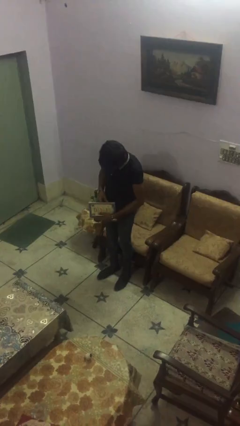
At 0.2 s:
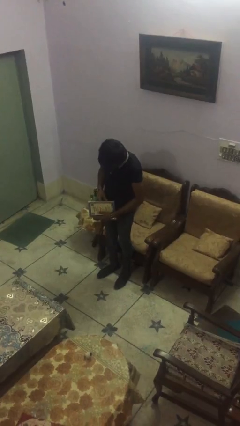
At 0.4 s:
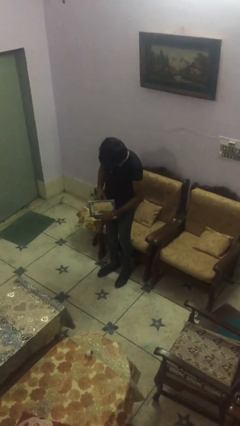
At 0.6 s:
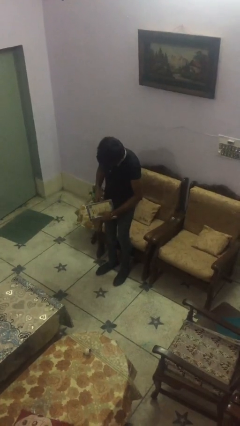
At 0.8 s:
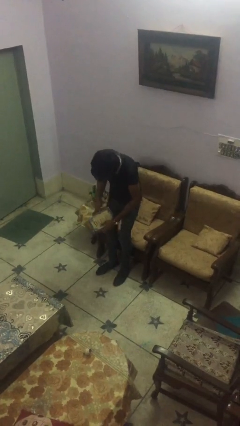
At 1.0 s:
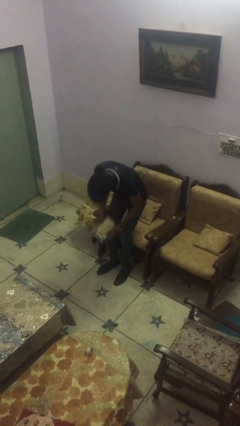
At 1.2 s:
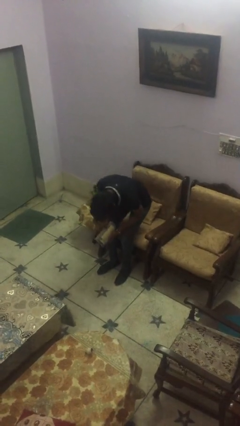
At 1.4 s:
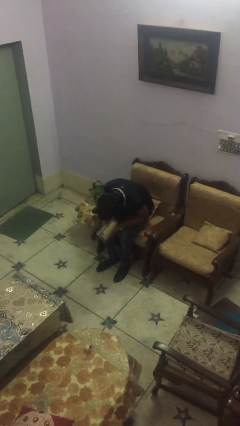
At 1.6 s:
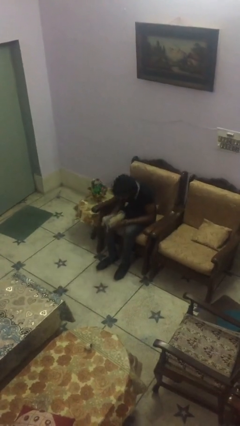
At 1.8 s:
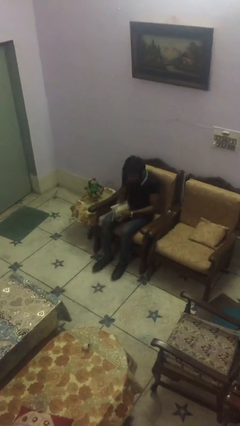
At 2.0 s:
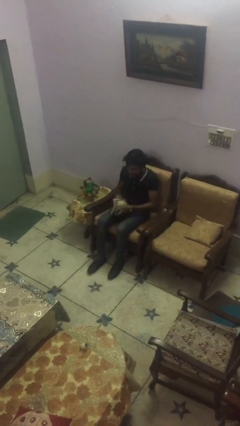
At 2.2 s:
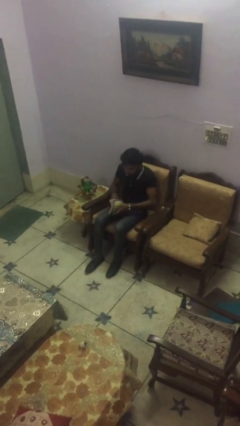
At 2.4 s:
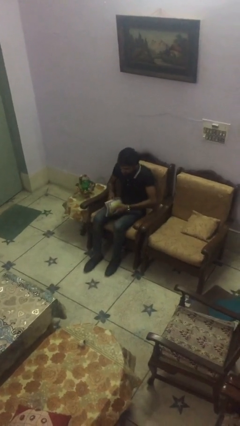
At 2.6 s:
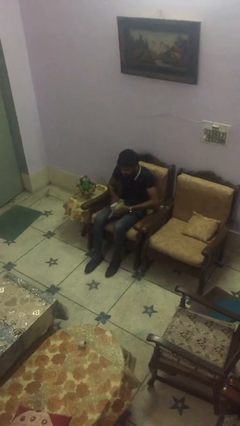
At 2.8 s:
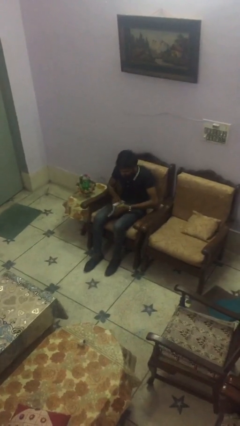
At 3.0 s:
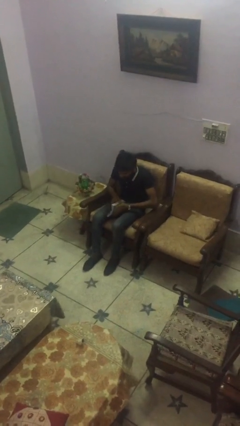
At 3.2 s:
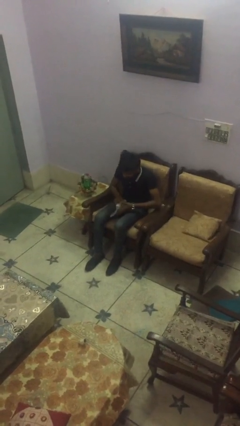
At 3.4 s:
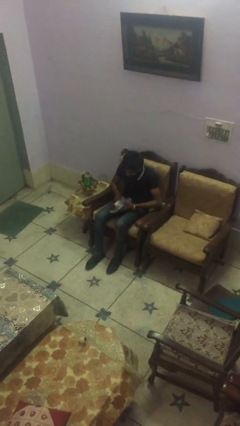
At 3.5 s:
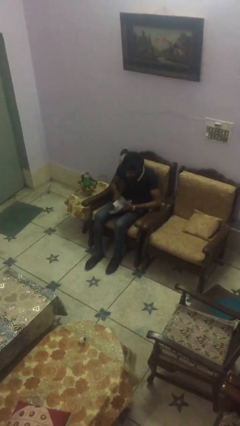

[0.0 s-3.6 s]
person sits down

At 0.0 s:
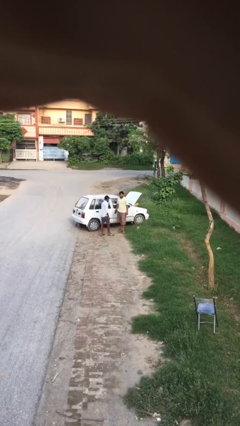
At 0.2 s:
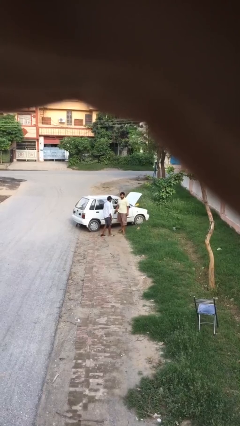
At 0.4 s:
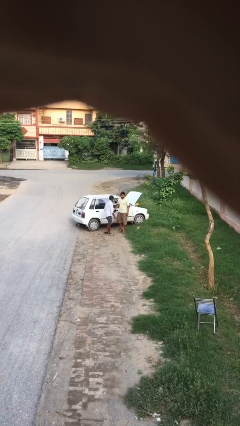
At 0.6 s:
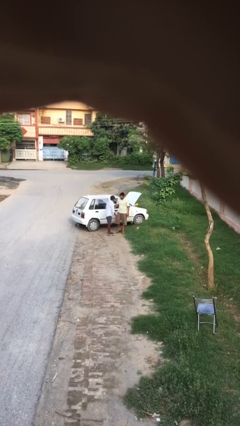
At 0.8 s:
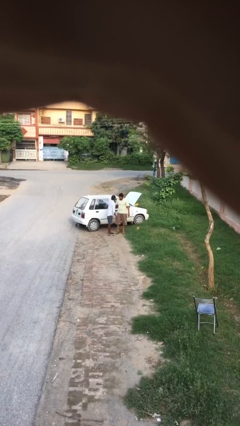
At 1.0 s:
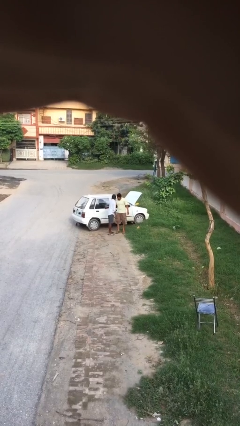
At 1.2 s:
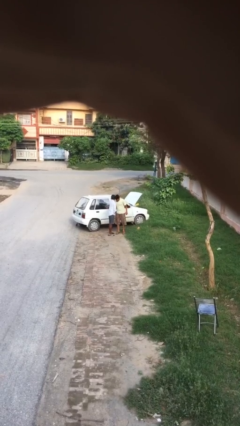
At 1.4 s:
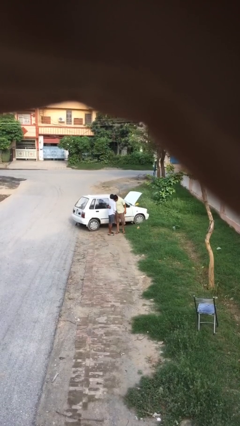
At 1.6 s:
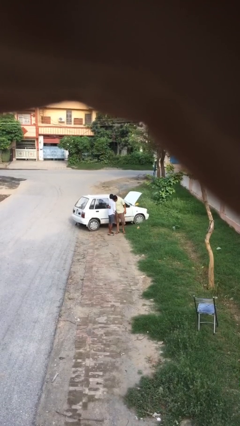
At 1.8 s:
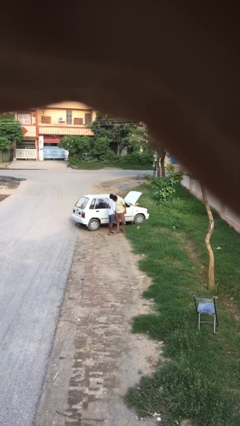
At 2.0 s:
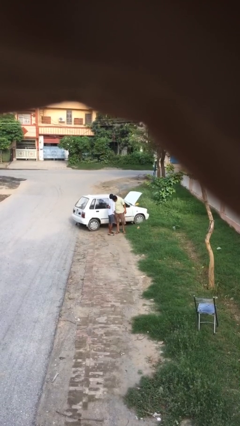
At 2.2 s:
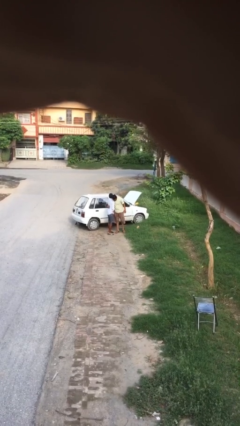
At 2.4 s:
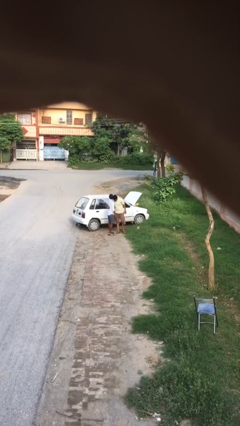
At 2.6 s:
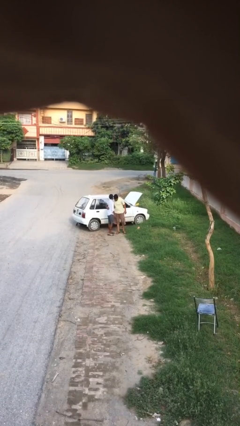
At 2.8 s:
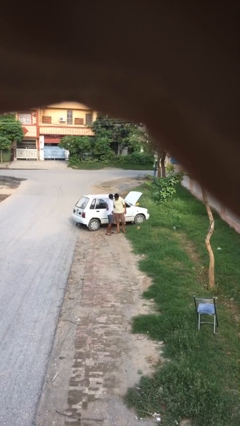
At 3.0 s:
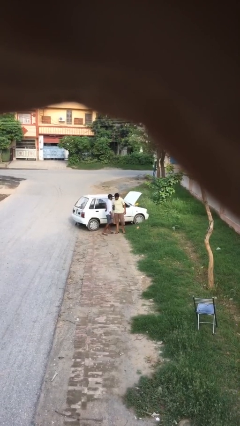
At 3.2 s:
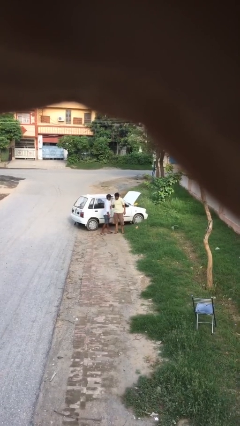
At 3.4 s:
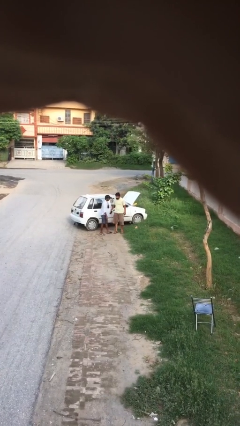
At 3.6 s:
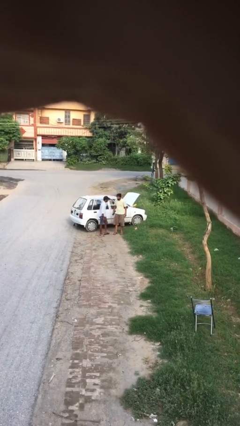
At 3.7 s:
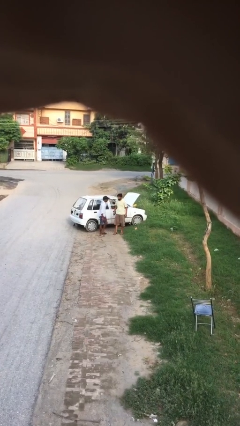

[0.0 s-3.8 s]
person embraces person

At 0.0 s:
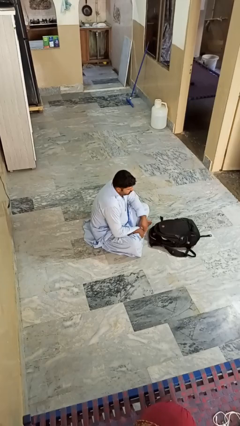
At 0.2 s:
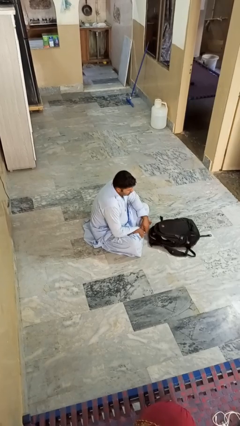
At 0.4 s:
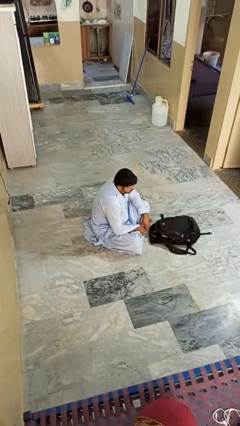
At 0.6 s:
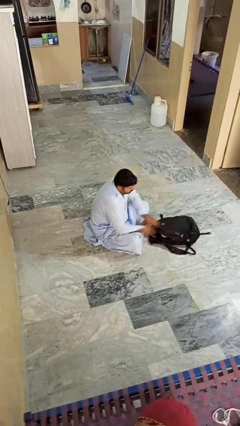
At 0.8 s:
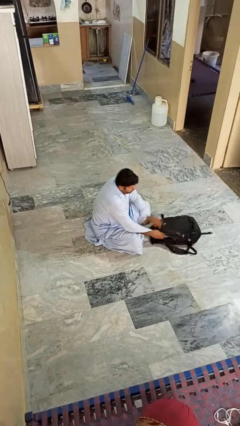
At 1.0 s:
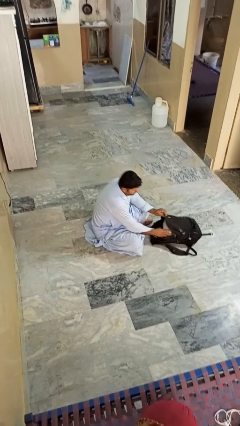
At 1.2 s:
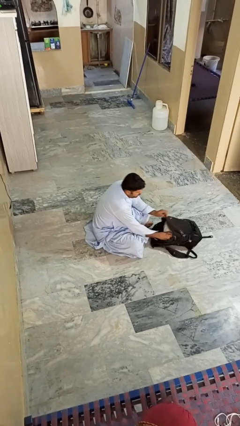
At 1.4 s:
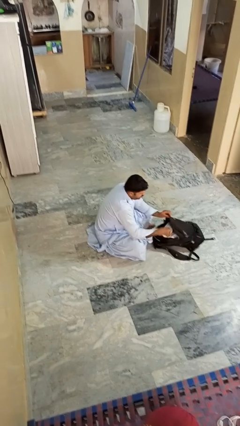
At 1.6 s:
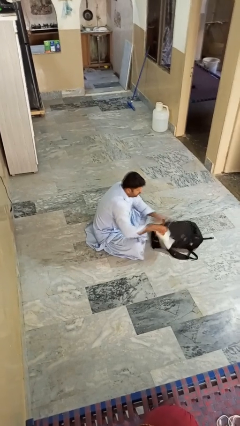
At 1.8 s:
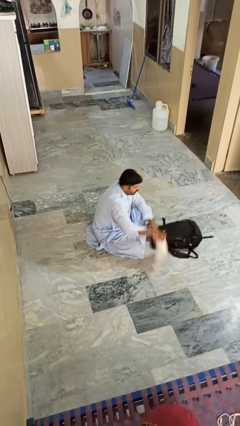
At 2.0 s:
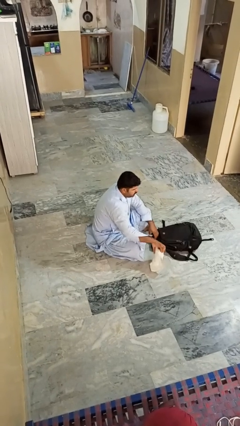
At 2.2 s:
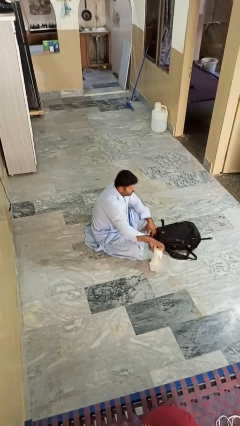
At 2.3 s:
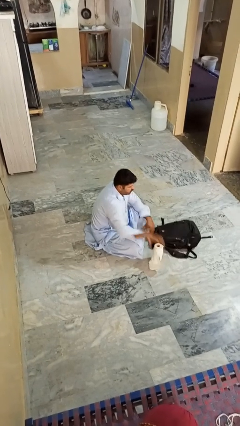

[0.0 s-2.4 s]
person takes object from bag

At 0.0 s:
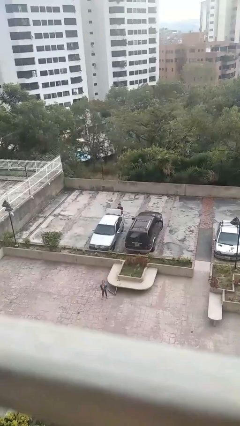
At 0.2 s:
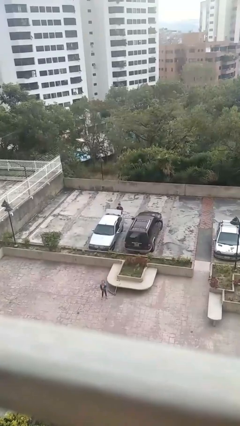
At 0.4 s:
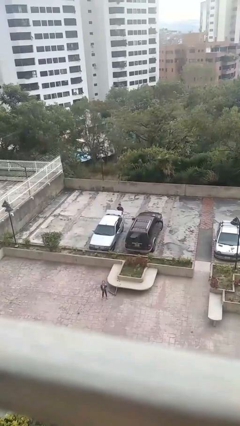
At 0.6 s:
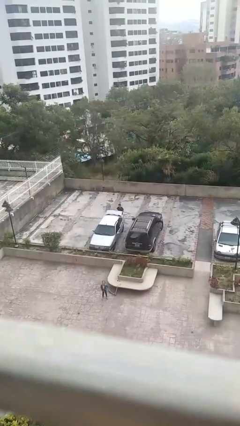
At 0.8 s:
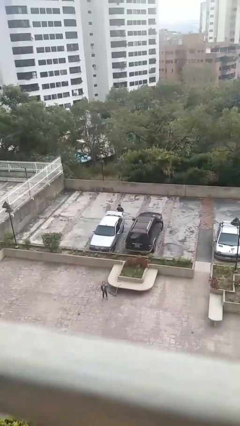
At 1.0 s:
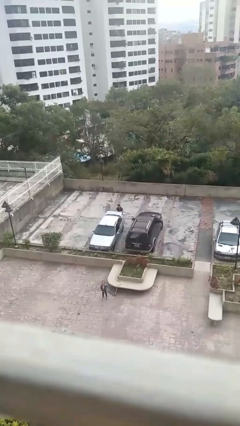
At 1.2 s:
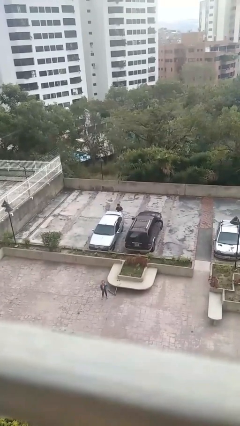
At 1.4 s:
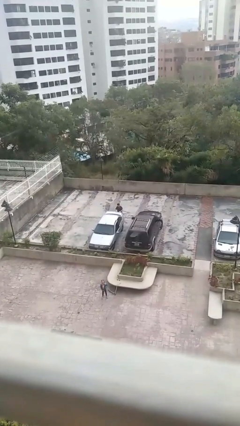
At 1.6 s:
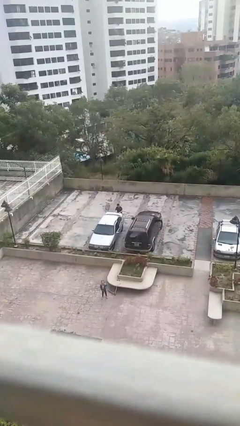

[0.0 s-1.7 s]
person closes car trunk

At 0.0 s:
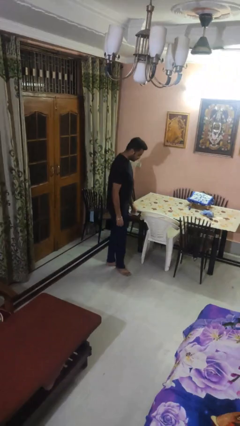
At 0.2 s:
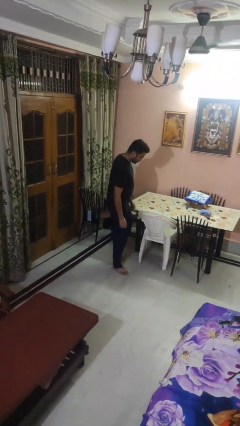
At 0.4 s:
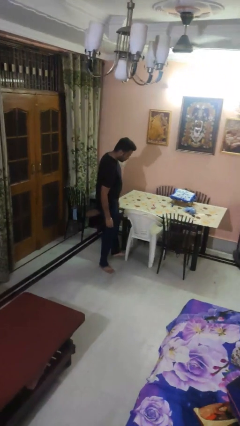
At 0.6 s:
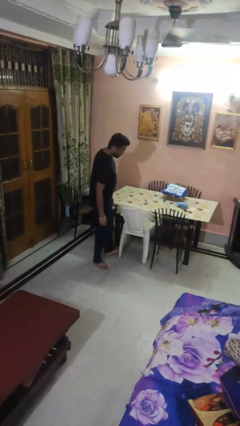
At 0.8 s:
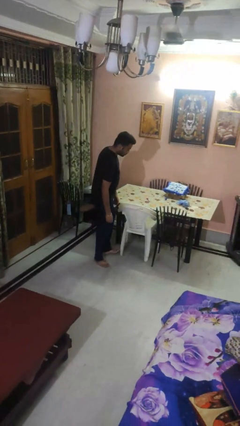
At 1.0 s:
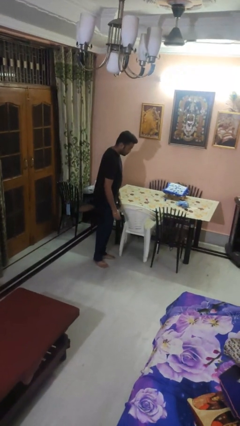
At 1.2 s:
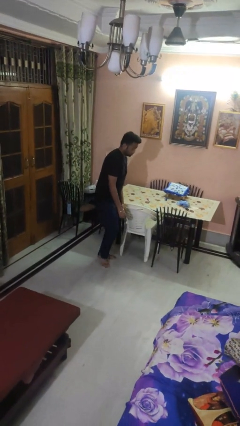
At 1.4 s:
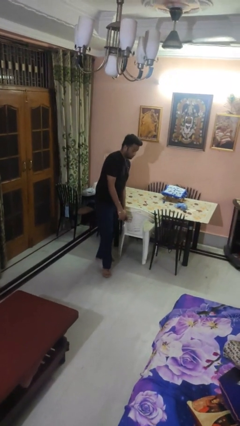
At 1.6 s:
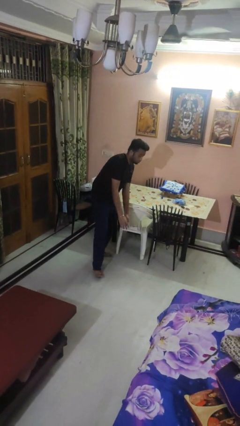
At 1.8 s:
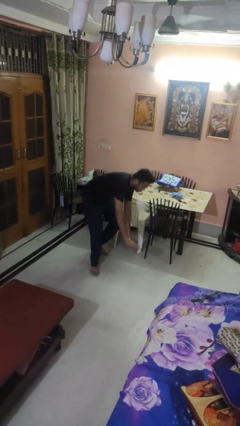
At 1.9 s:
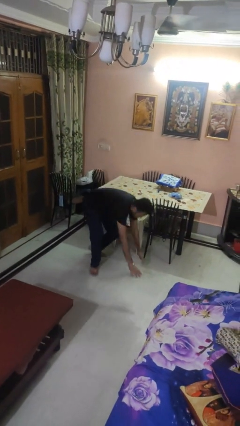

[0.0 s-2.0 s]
person trips on object on floor

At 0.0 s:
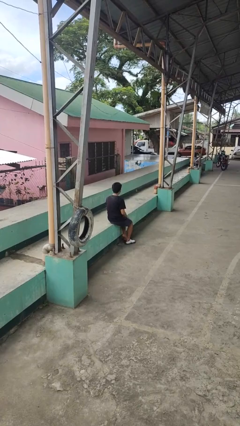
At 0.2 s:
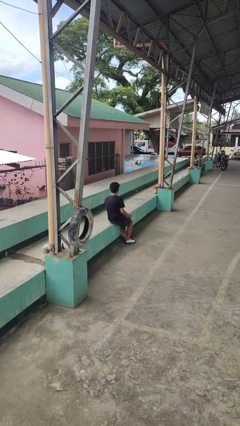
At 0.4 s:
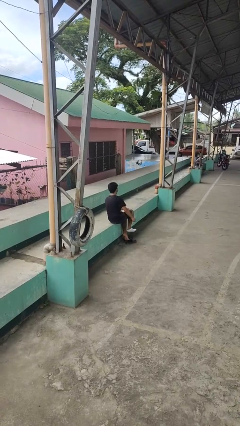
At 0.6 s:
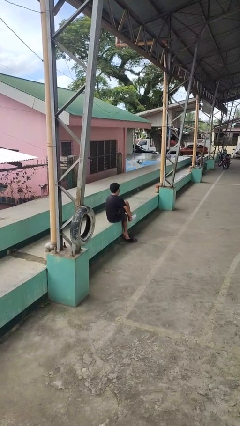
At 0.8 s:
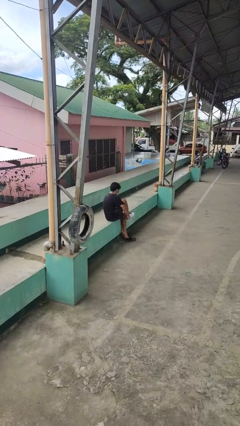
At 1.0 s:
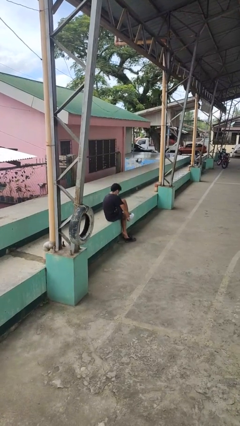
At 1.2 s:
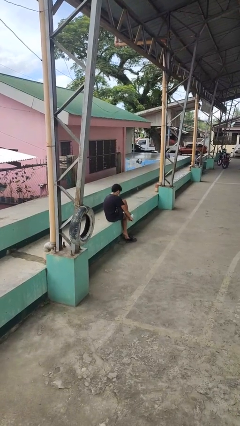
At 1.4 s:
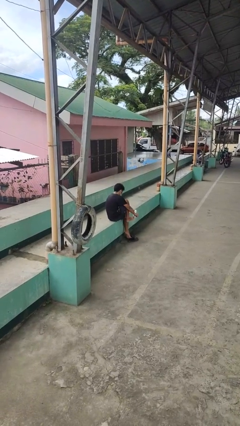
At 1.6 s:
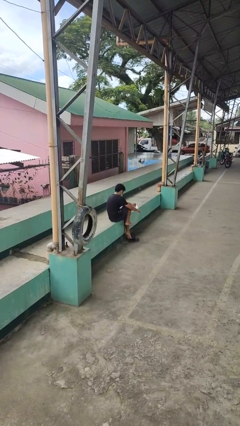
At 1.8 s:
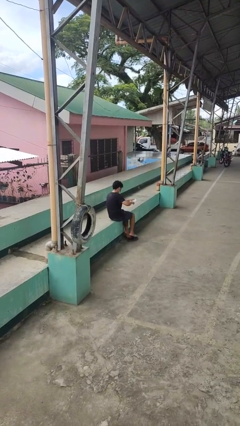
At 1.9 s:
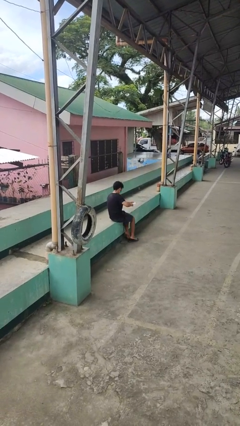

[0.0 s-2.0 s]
person takes off socks

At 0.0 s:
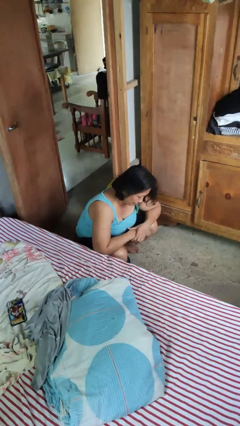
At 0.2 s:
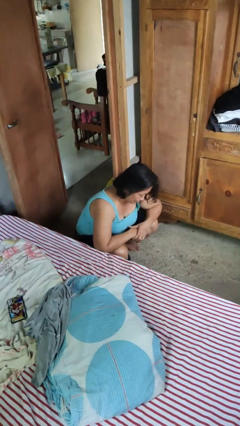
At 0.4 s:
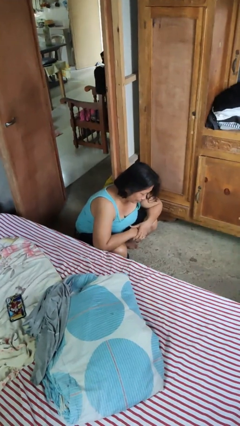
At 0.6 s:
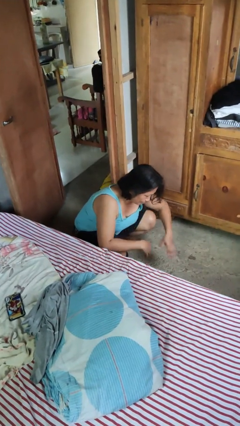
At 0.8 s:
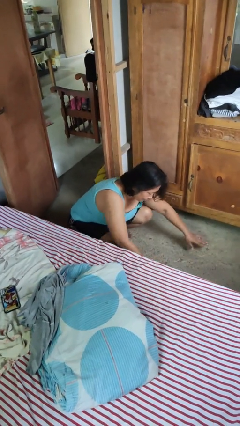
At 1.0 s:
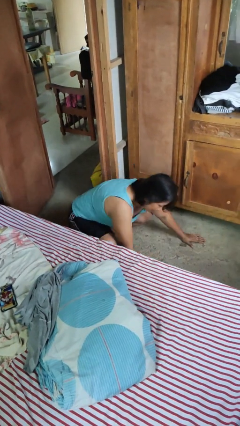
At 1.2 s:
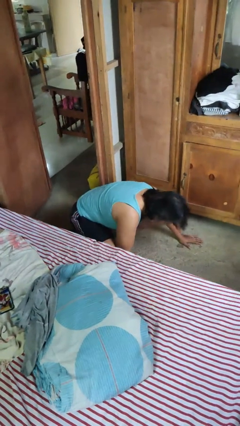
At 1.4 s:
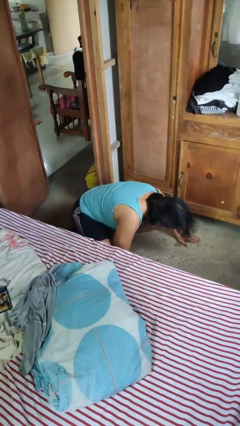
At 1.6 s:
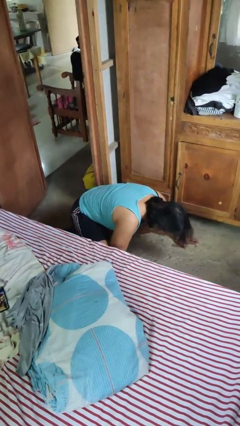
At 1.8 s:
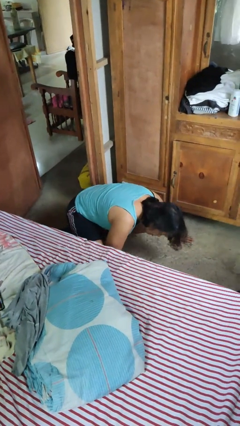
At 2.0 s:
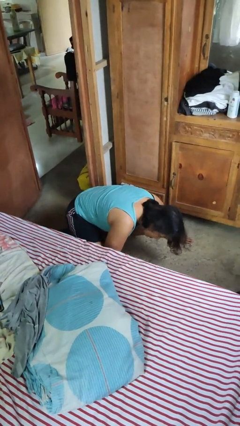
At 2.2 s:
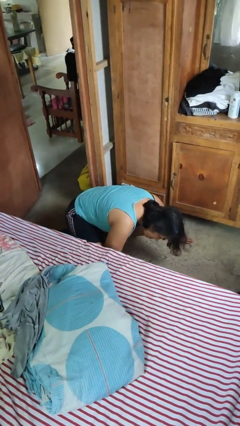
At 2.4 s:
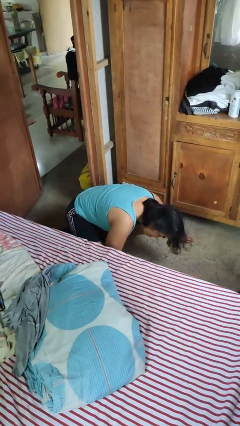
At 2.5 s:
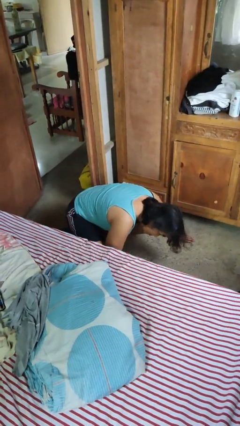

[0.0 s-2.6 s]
person searches under bed
